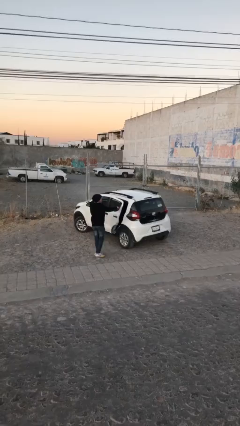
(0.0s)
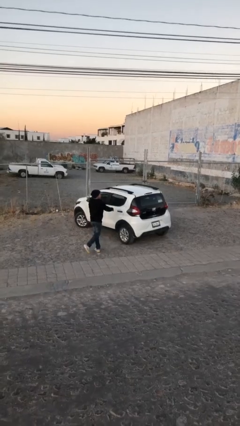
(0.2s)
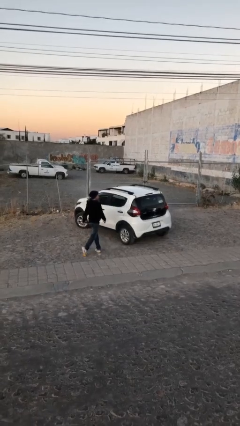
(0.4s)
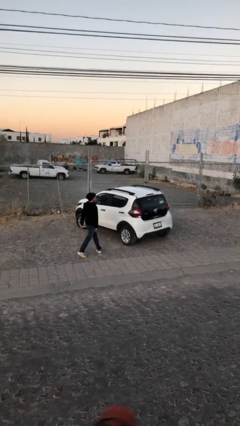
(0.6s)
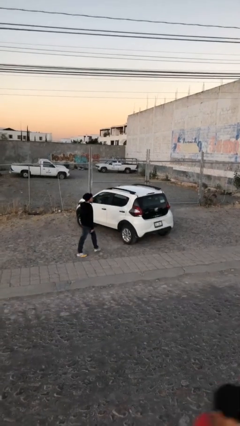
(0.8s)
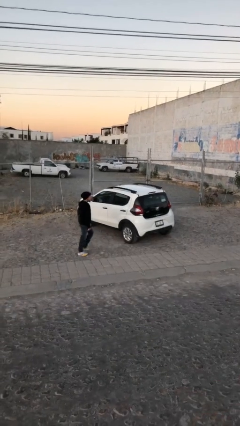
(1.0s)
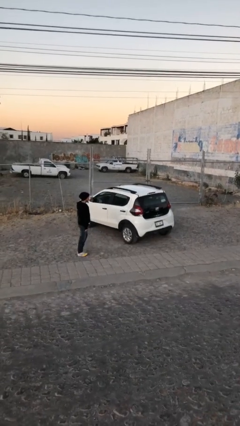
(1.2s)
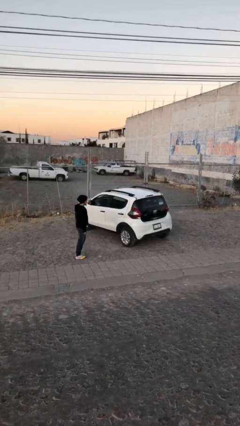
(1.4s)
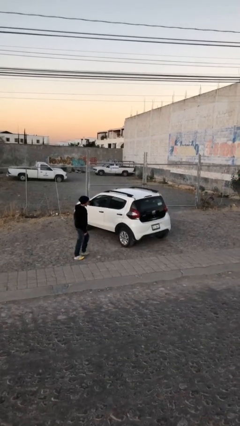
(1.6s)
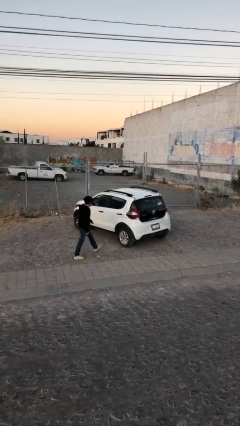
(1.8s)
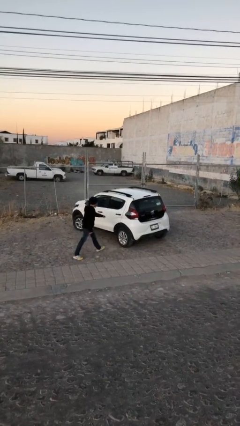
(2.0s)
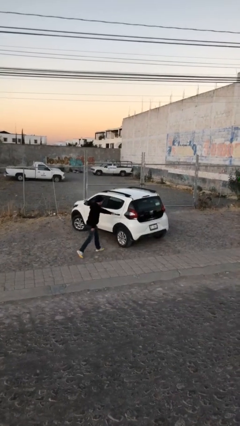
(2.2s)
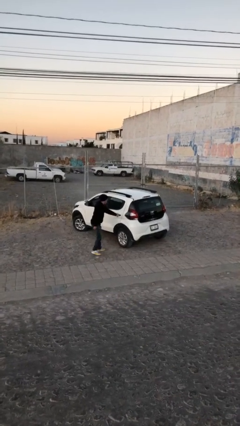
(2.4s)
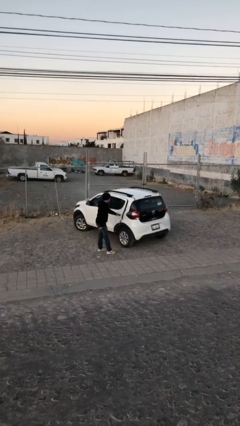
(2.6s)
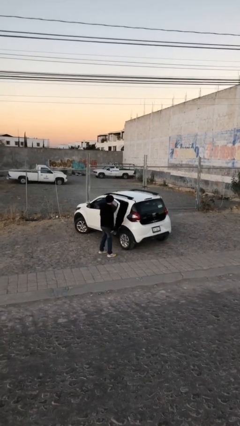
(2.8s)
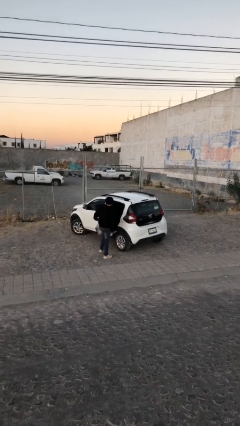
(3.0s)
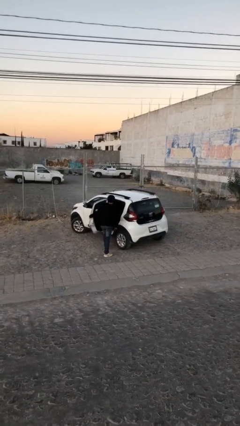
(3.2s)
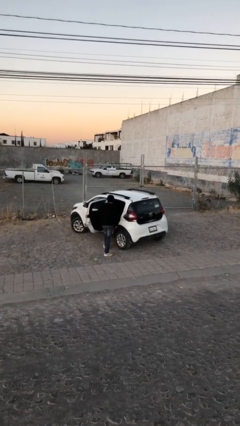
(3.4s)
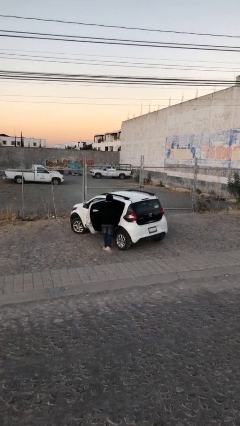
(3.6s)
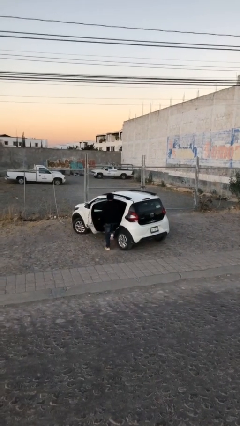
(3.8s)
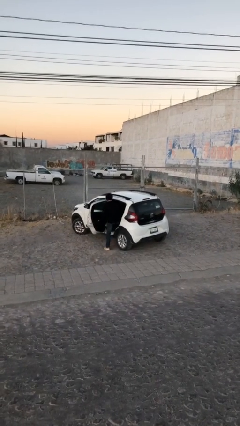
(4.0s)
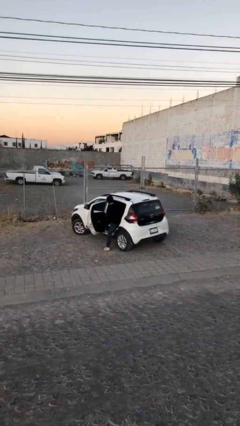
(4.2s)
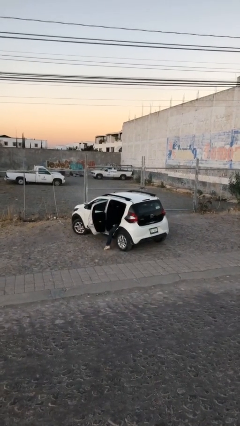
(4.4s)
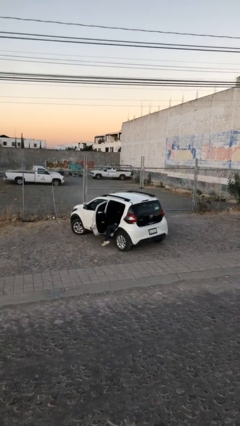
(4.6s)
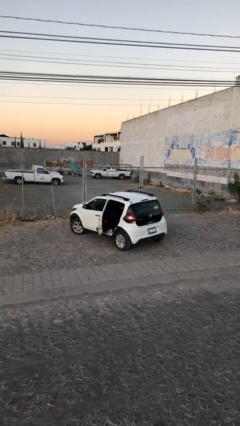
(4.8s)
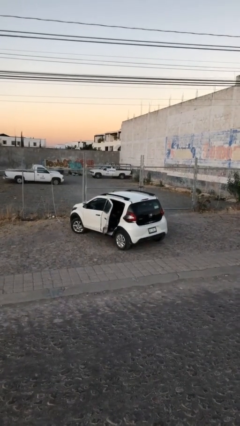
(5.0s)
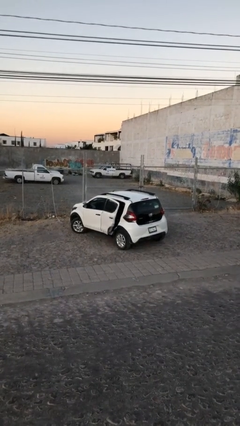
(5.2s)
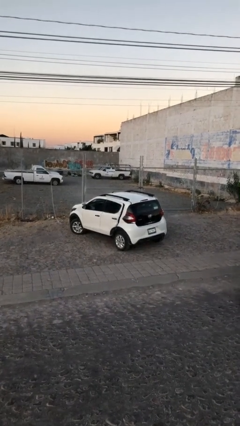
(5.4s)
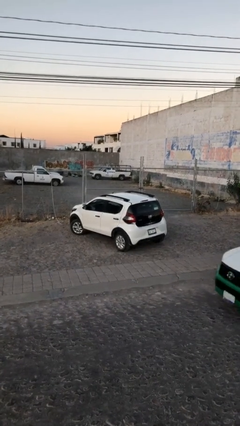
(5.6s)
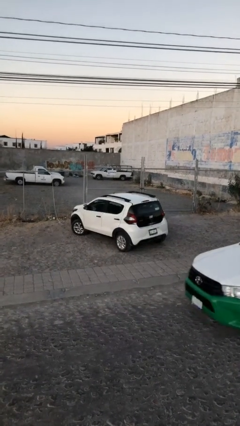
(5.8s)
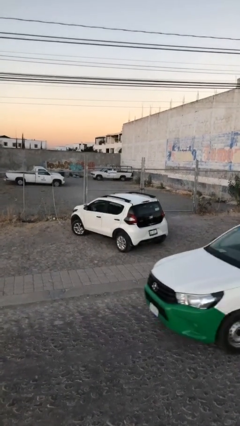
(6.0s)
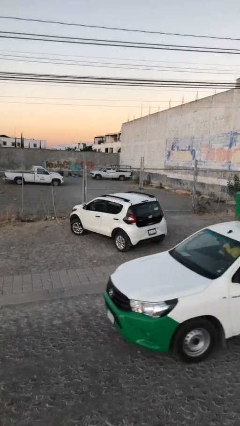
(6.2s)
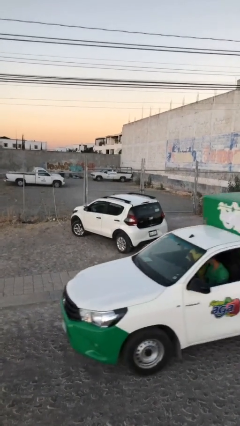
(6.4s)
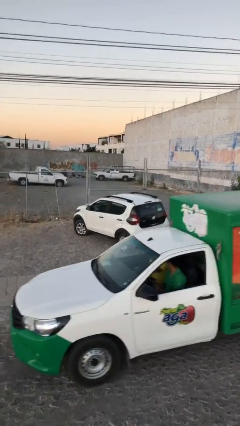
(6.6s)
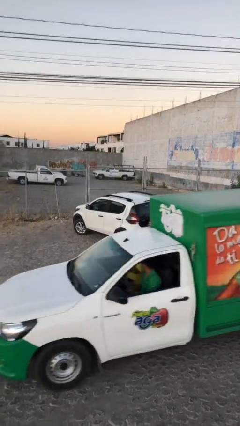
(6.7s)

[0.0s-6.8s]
car picks up person

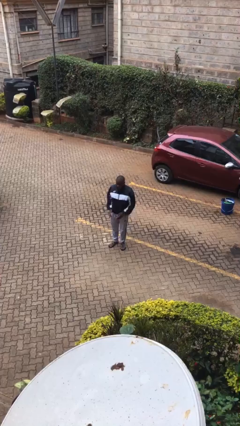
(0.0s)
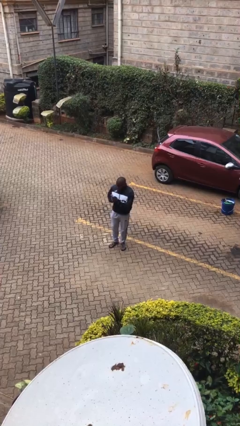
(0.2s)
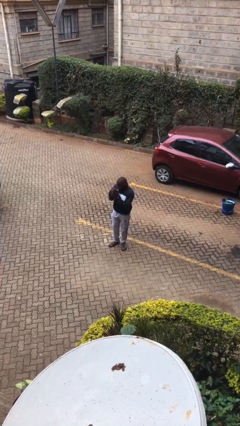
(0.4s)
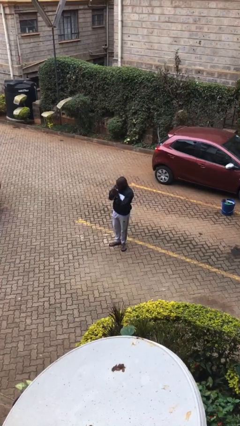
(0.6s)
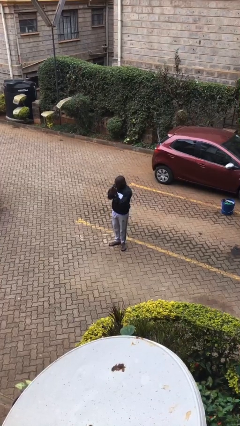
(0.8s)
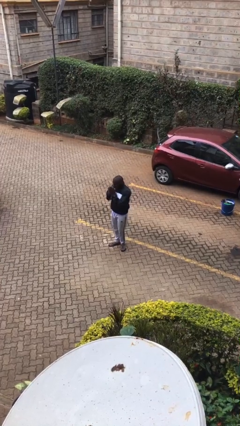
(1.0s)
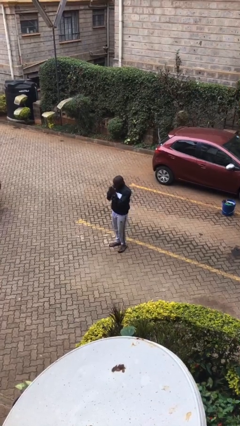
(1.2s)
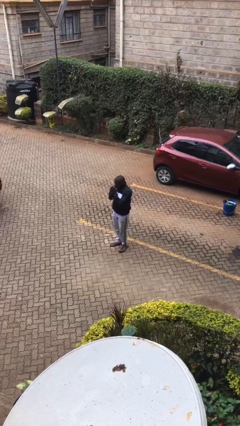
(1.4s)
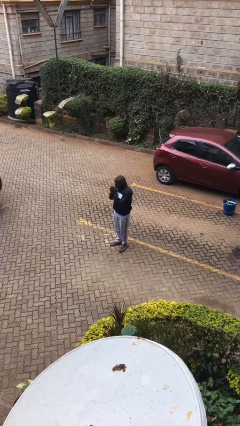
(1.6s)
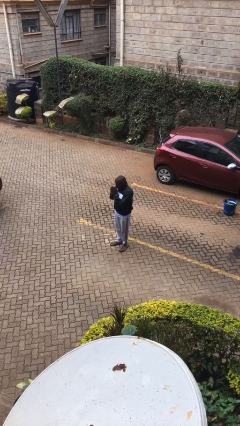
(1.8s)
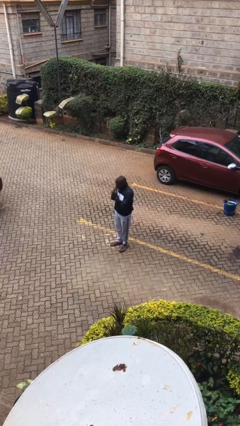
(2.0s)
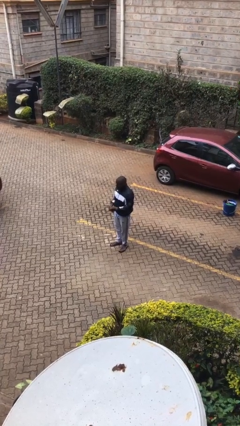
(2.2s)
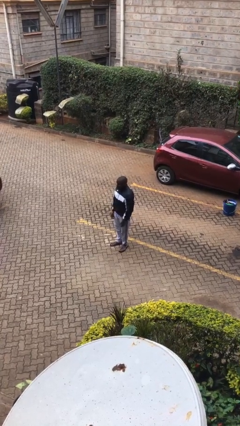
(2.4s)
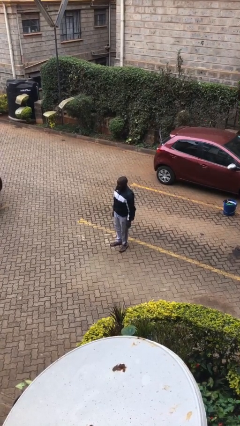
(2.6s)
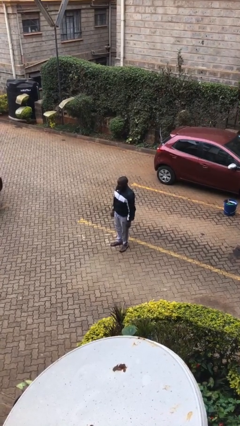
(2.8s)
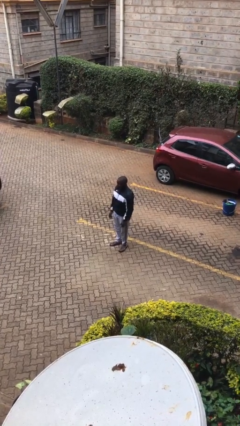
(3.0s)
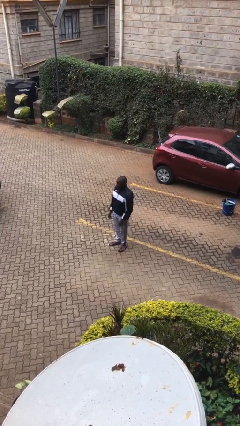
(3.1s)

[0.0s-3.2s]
person blows into hands

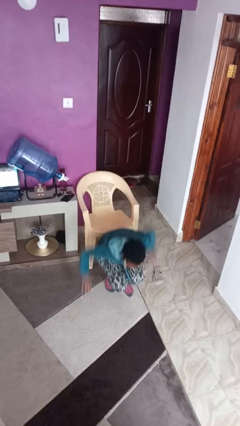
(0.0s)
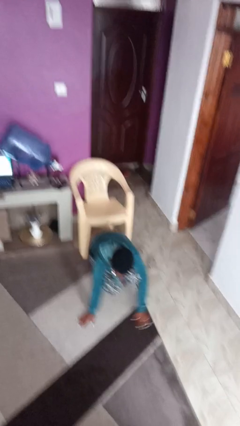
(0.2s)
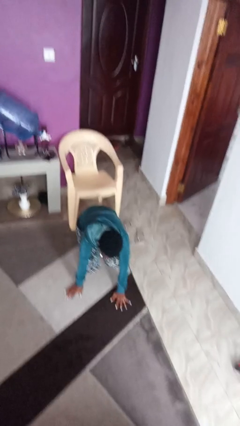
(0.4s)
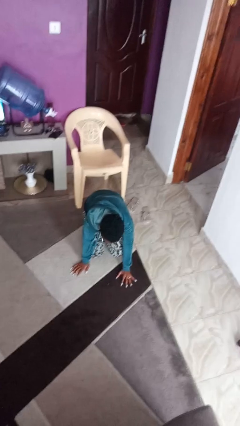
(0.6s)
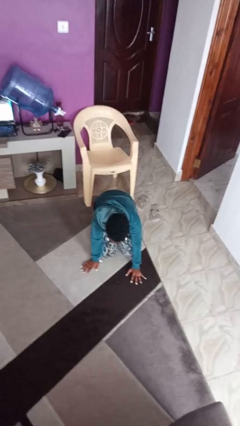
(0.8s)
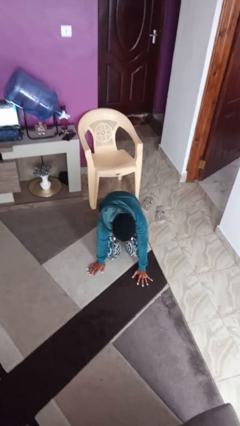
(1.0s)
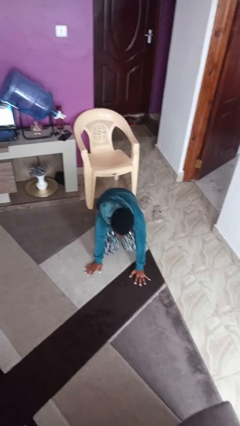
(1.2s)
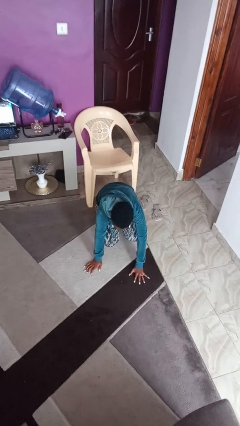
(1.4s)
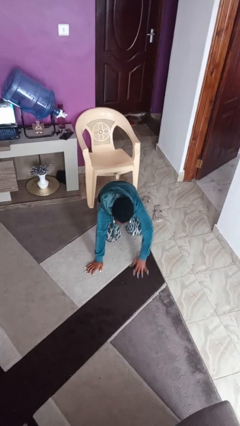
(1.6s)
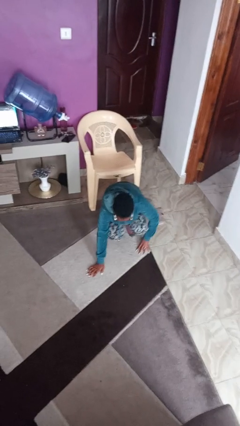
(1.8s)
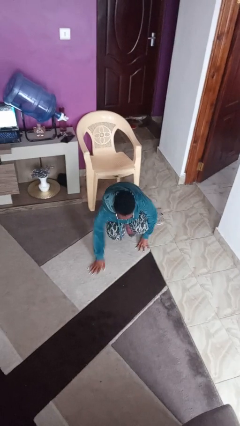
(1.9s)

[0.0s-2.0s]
person falls from chair

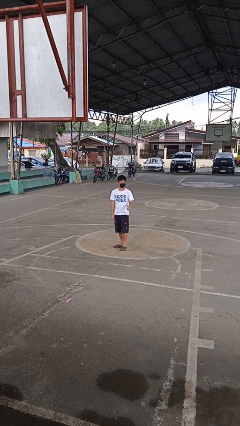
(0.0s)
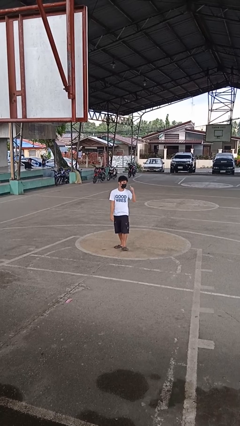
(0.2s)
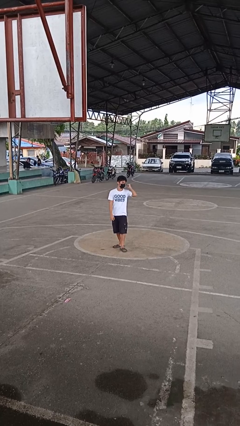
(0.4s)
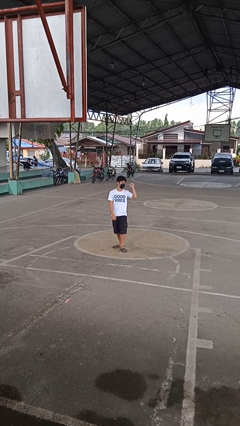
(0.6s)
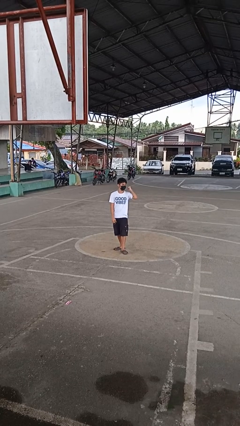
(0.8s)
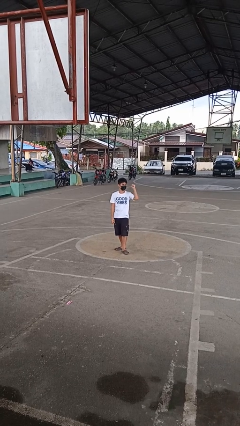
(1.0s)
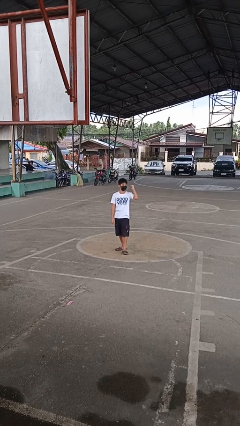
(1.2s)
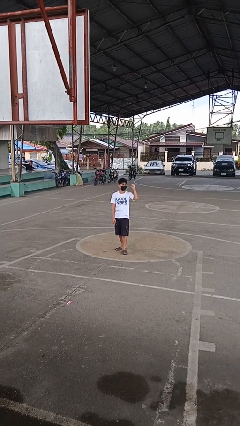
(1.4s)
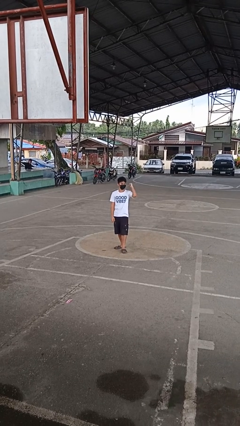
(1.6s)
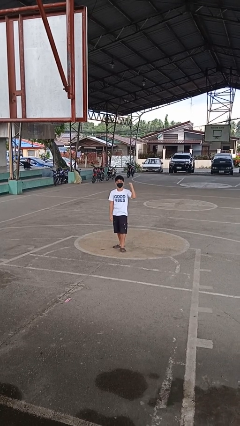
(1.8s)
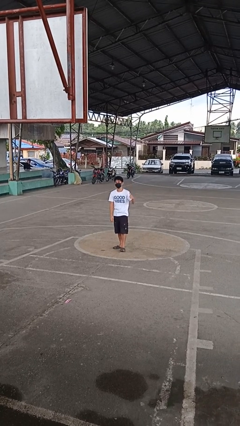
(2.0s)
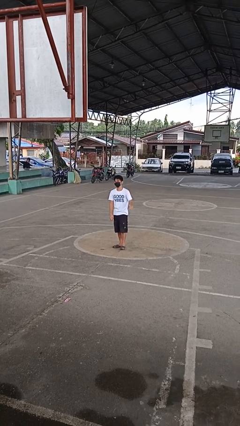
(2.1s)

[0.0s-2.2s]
person gestures behind me

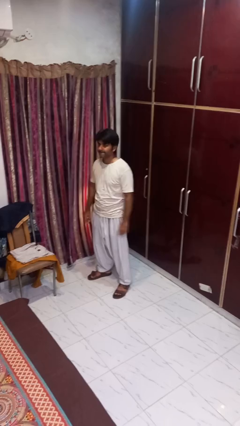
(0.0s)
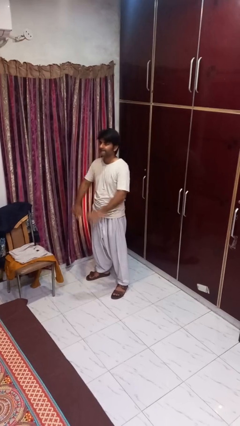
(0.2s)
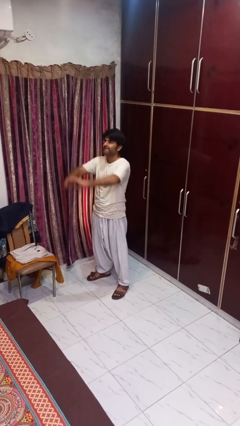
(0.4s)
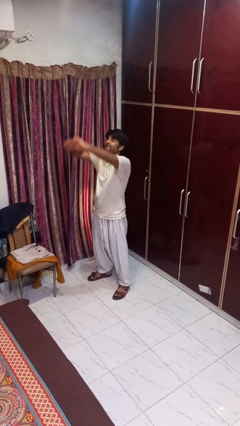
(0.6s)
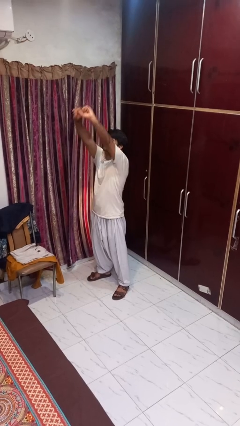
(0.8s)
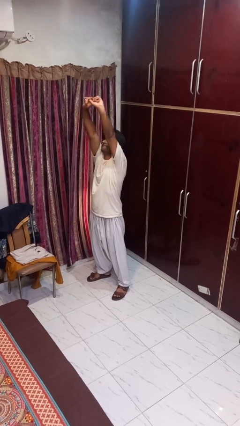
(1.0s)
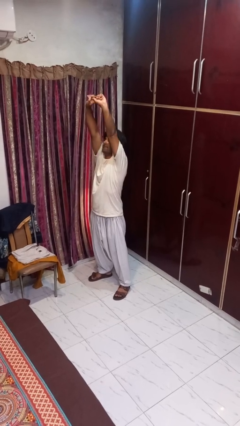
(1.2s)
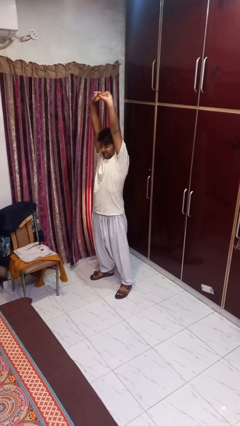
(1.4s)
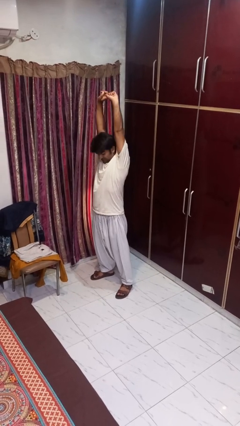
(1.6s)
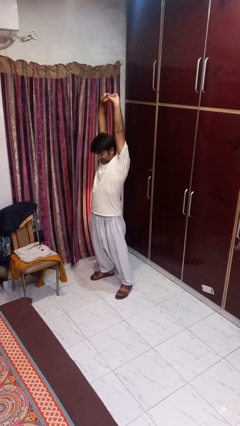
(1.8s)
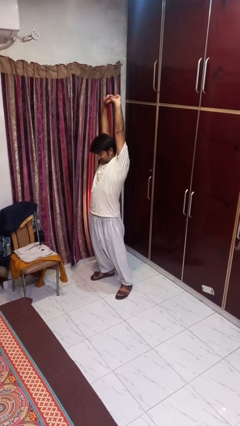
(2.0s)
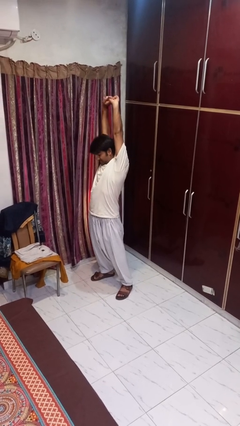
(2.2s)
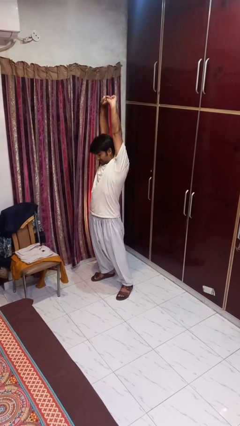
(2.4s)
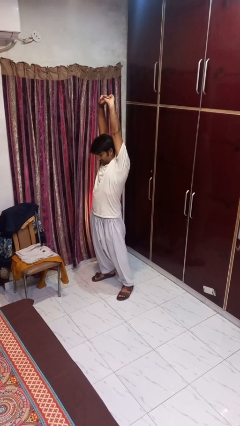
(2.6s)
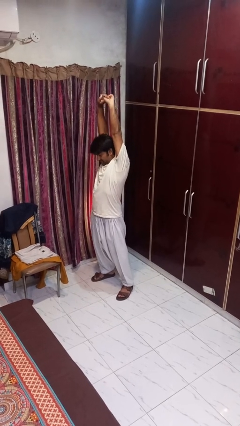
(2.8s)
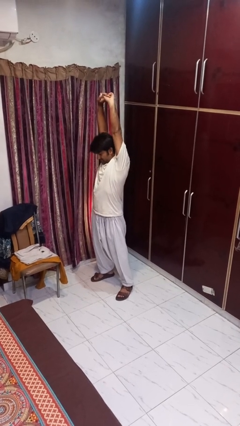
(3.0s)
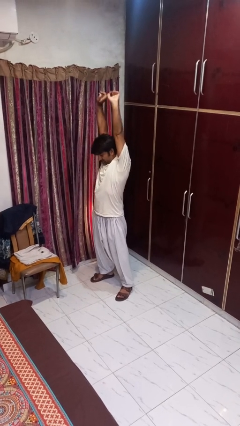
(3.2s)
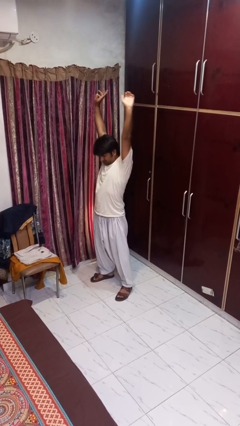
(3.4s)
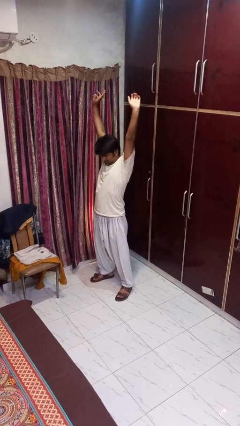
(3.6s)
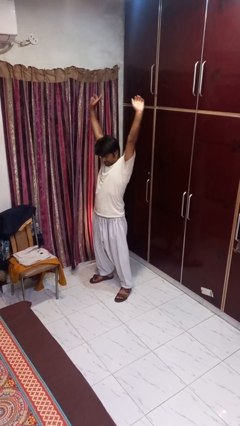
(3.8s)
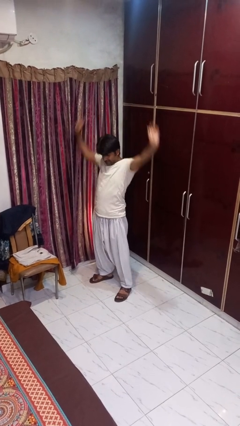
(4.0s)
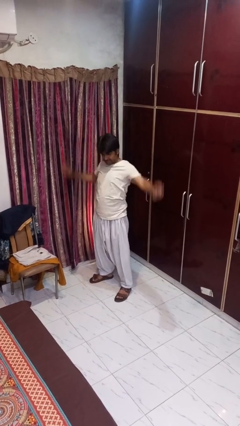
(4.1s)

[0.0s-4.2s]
person stretches arms over head
